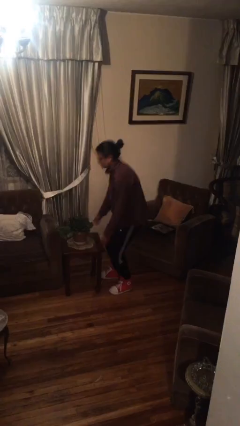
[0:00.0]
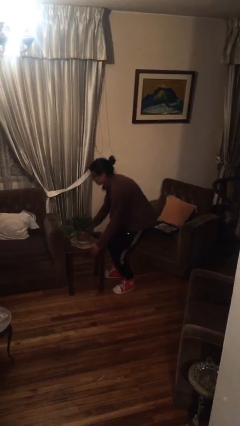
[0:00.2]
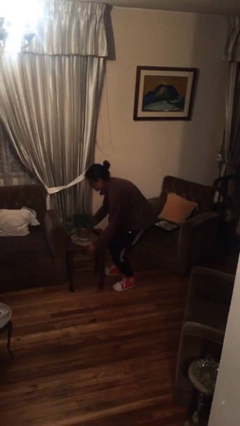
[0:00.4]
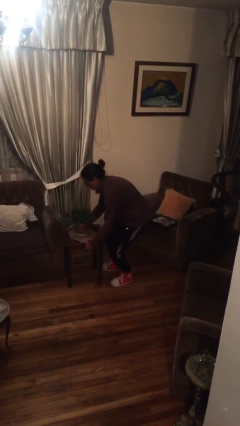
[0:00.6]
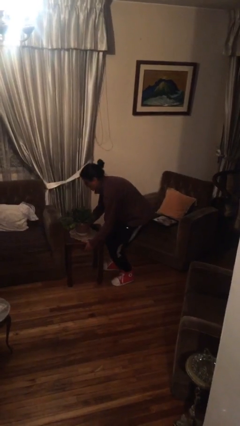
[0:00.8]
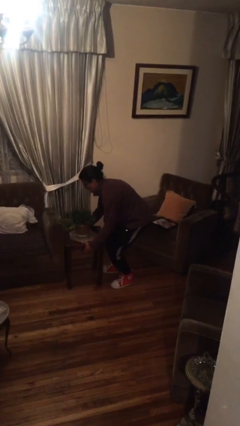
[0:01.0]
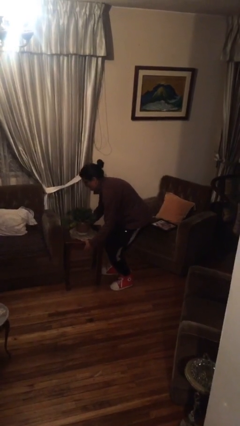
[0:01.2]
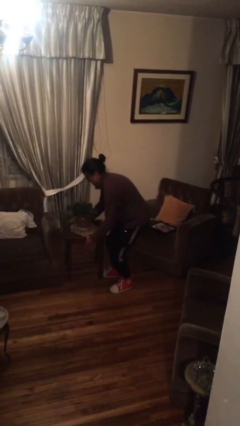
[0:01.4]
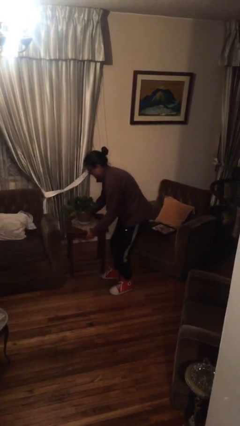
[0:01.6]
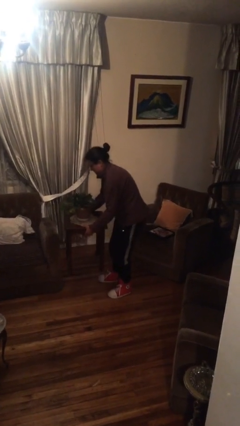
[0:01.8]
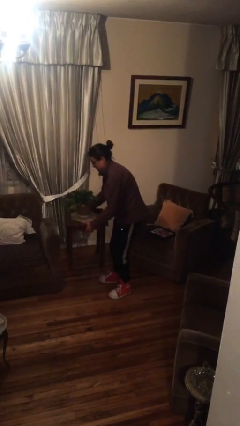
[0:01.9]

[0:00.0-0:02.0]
person picks up object from floor

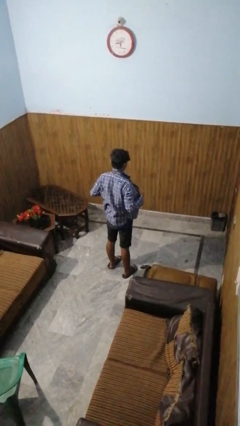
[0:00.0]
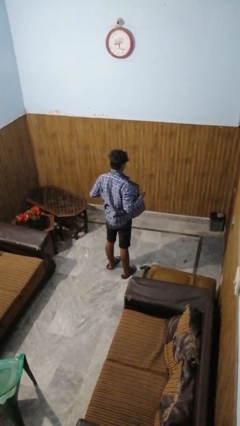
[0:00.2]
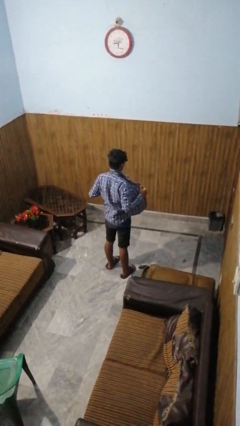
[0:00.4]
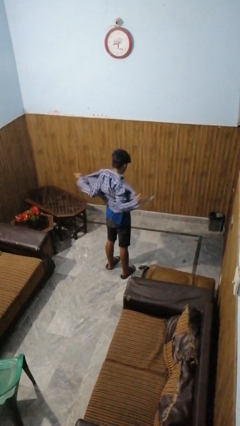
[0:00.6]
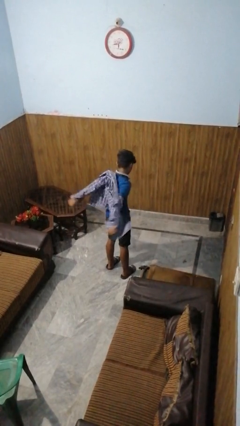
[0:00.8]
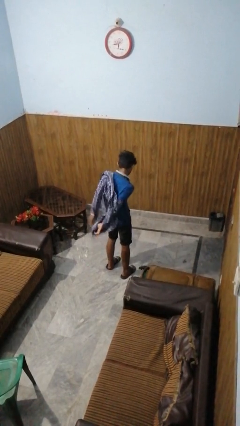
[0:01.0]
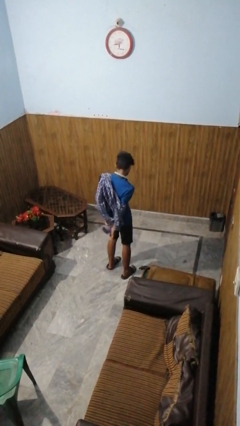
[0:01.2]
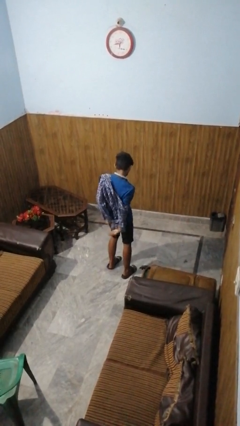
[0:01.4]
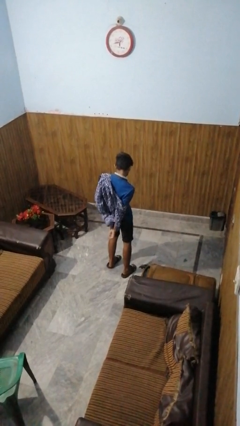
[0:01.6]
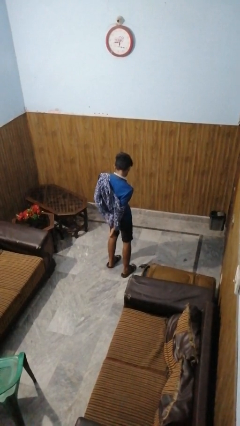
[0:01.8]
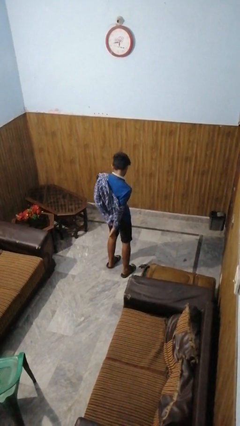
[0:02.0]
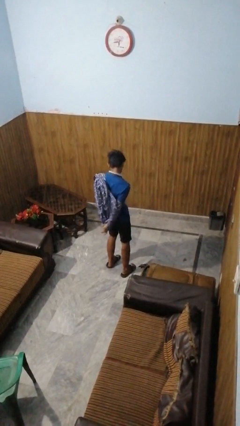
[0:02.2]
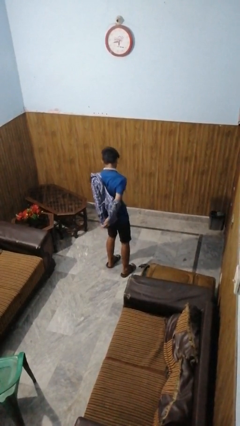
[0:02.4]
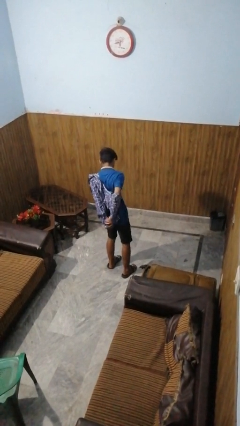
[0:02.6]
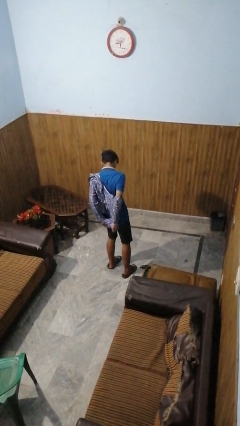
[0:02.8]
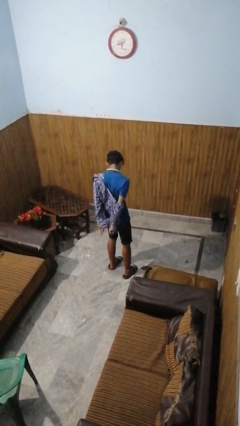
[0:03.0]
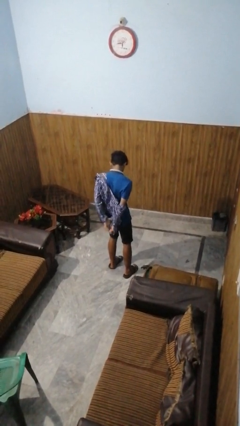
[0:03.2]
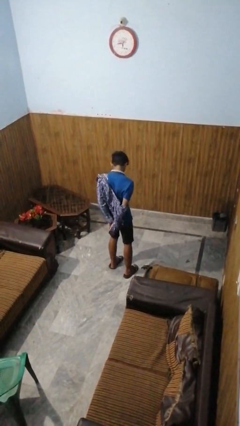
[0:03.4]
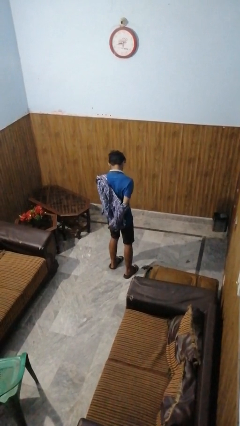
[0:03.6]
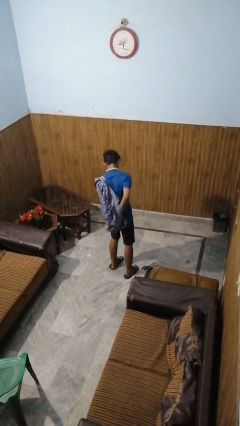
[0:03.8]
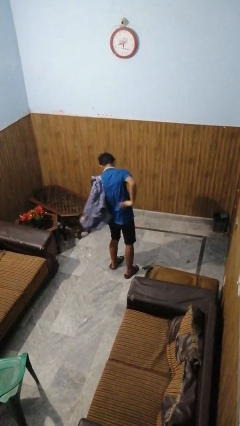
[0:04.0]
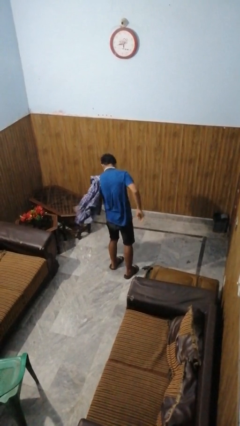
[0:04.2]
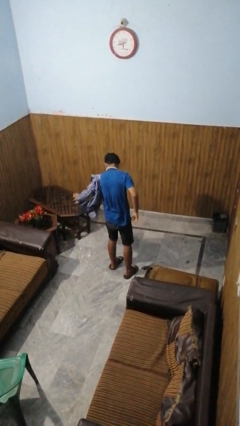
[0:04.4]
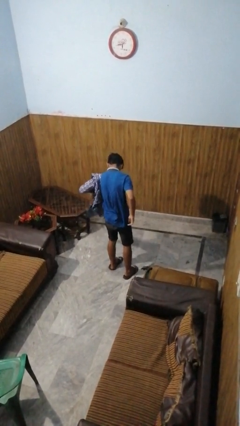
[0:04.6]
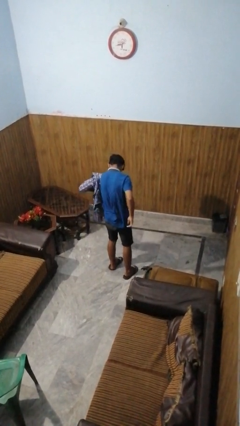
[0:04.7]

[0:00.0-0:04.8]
person takes off shirt

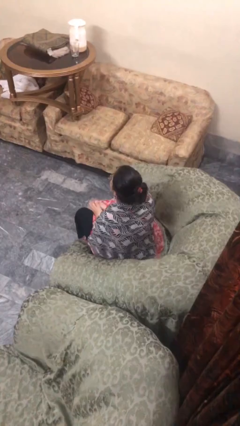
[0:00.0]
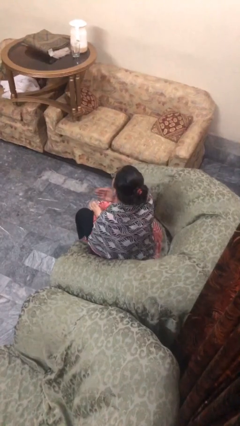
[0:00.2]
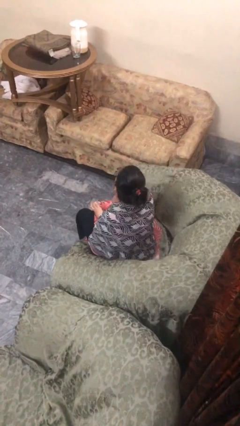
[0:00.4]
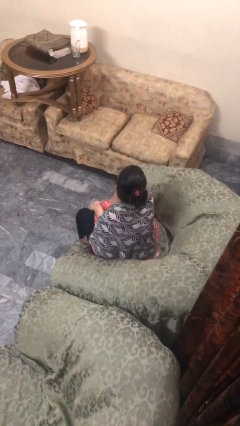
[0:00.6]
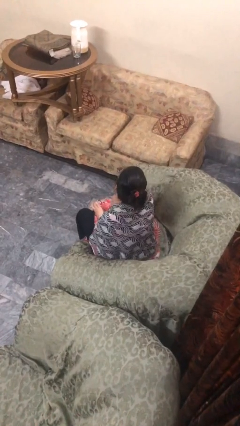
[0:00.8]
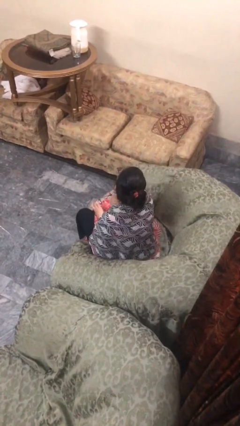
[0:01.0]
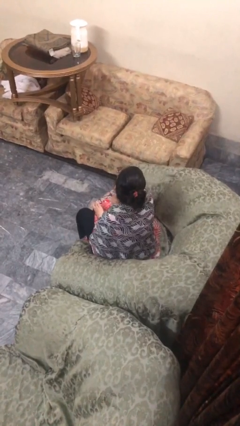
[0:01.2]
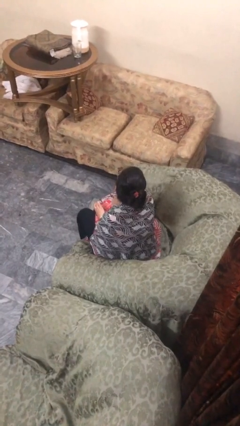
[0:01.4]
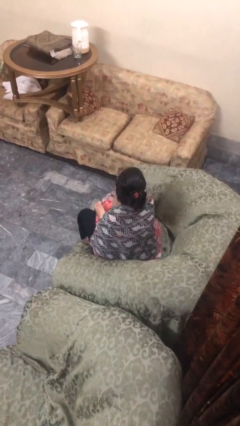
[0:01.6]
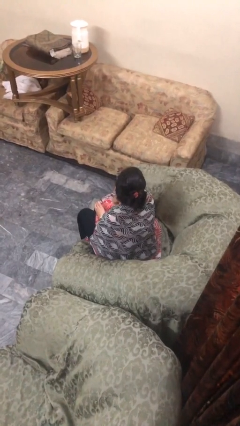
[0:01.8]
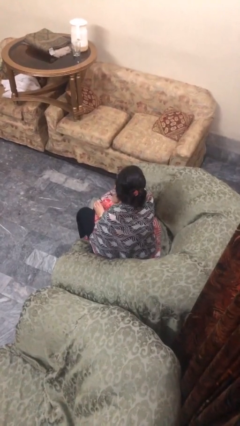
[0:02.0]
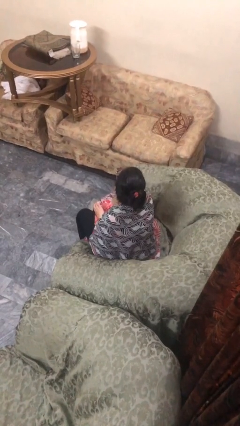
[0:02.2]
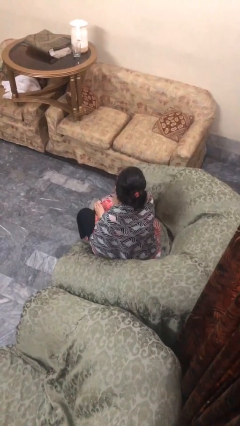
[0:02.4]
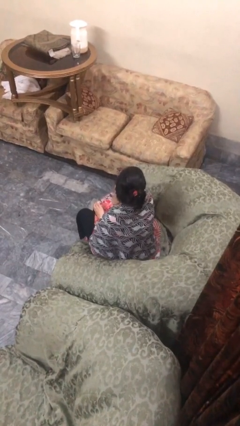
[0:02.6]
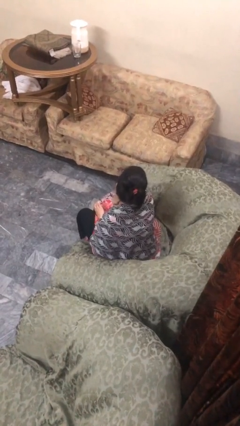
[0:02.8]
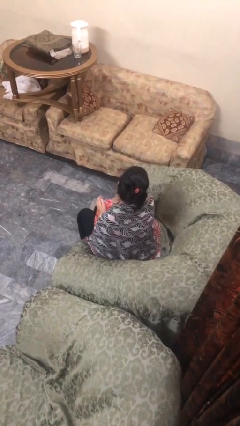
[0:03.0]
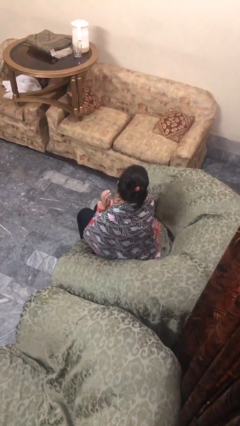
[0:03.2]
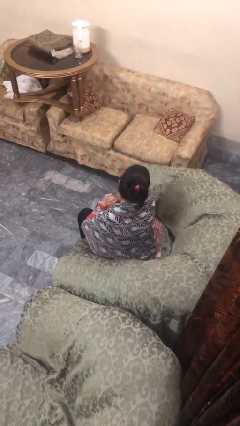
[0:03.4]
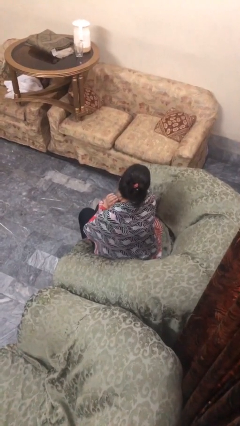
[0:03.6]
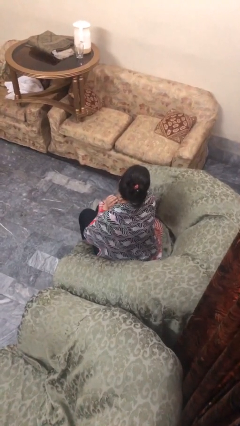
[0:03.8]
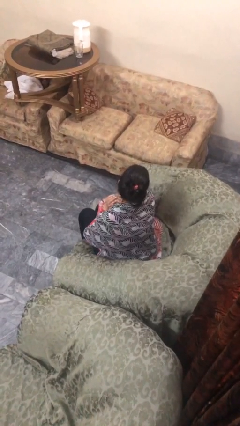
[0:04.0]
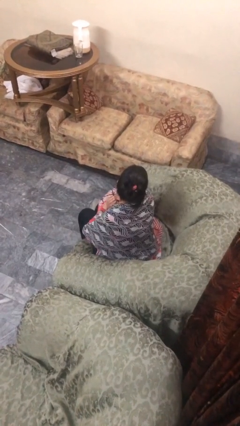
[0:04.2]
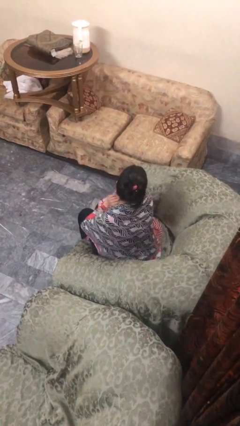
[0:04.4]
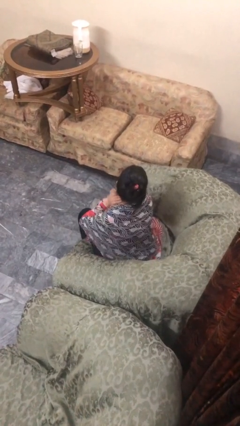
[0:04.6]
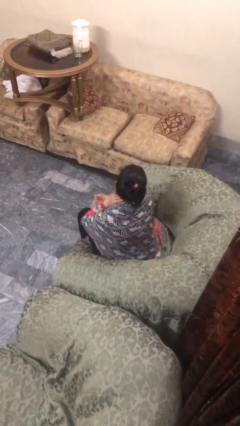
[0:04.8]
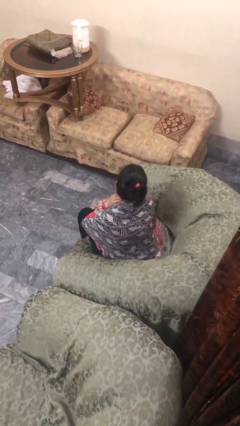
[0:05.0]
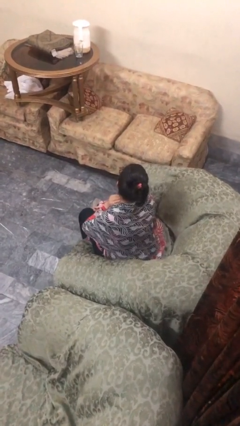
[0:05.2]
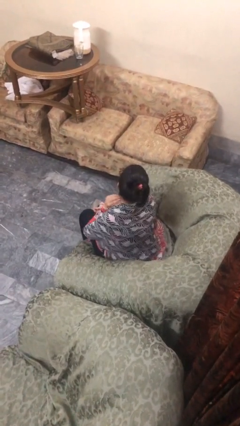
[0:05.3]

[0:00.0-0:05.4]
person rubs neck

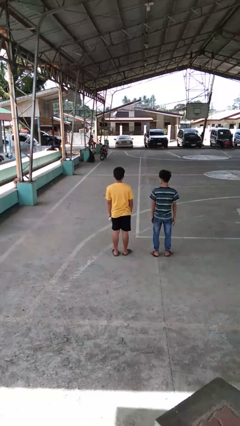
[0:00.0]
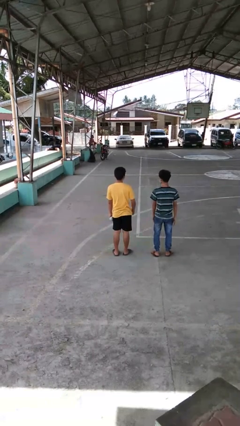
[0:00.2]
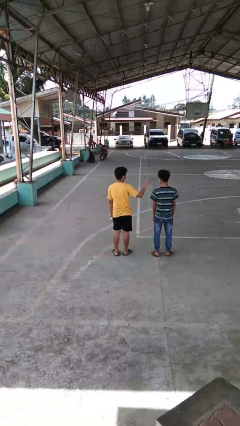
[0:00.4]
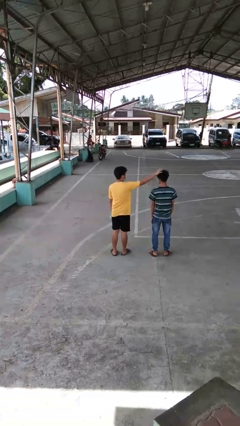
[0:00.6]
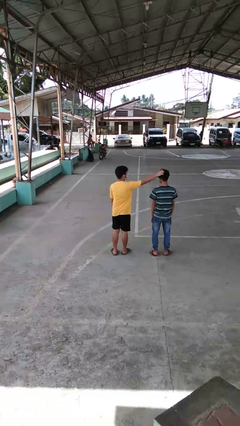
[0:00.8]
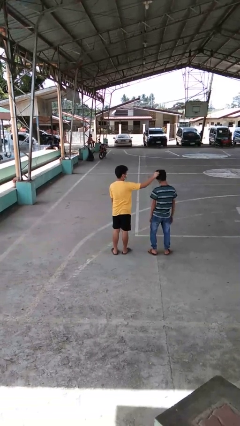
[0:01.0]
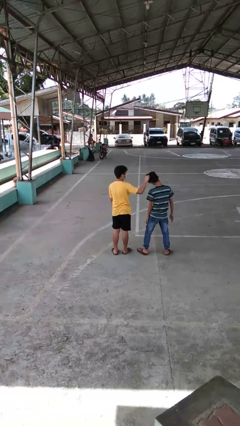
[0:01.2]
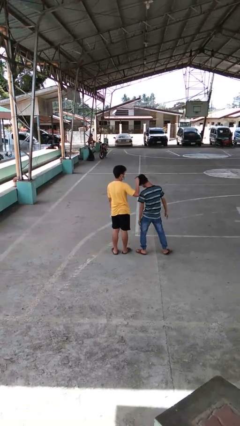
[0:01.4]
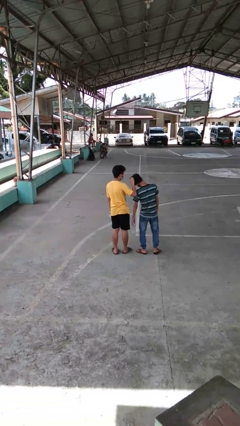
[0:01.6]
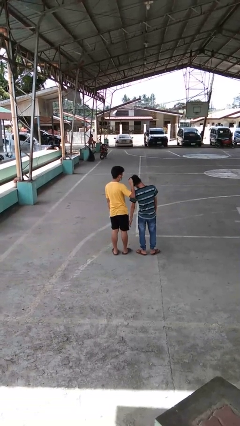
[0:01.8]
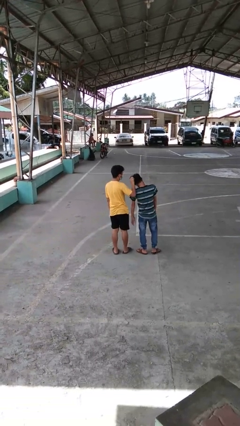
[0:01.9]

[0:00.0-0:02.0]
person grabs person by hair

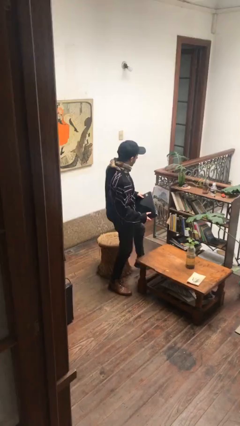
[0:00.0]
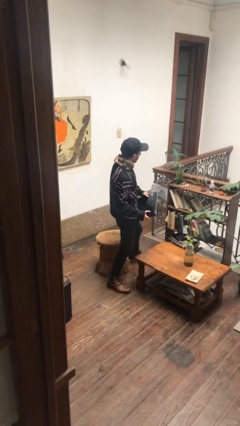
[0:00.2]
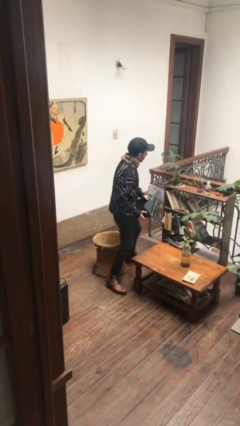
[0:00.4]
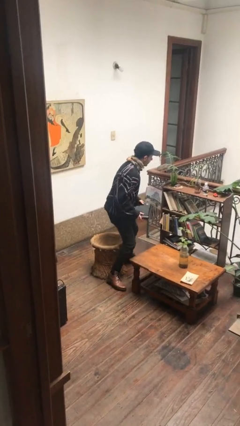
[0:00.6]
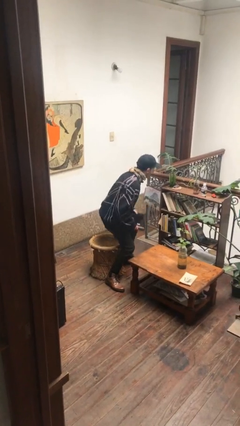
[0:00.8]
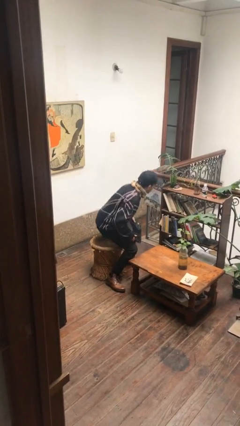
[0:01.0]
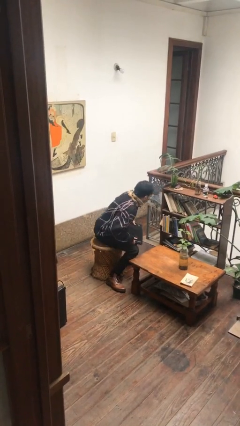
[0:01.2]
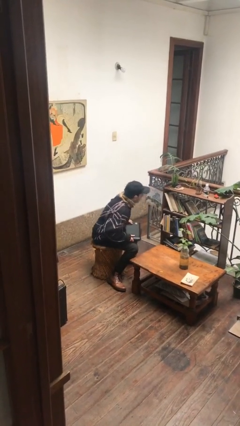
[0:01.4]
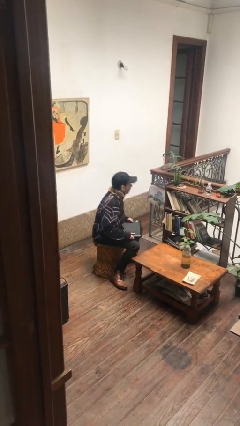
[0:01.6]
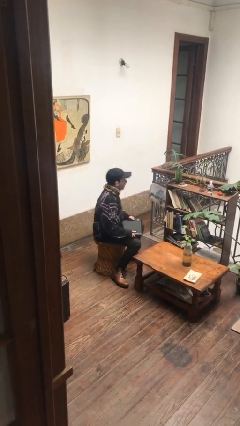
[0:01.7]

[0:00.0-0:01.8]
person sits down

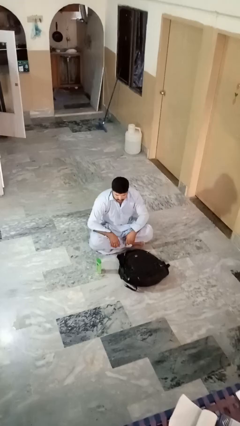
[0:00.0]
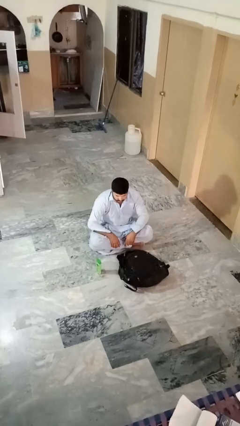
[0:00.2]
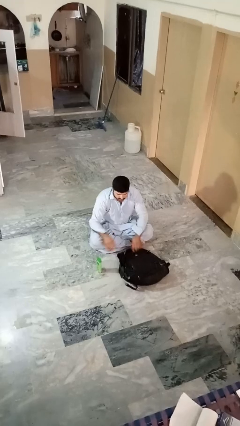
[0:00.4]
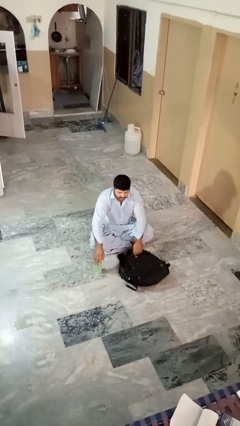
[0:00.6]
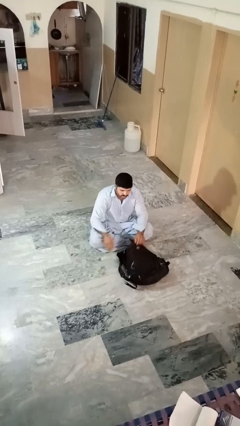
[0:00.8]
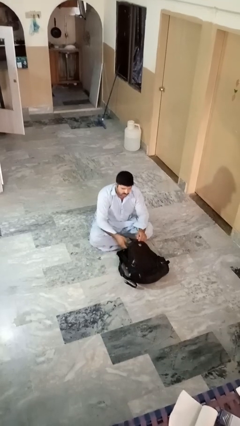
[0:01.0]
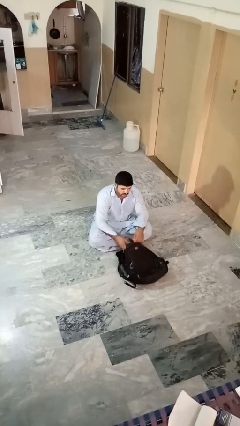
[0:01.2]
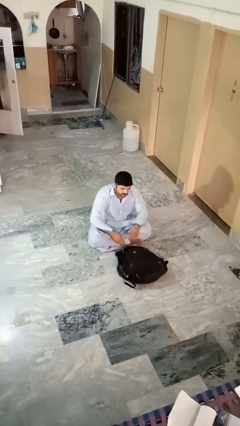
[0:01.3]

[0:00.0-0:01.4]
person puts object into bag
